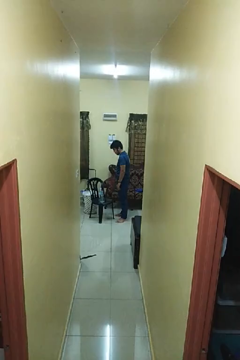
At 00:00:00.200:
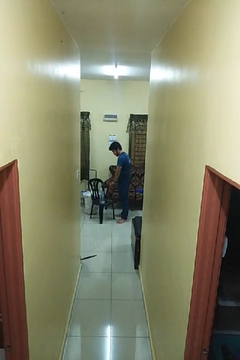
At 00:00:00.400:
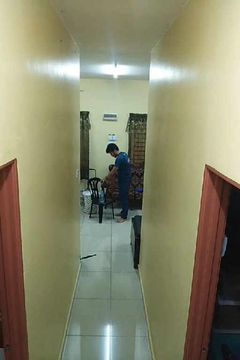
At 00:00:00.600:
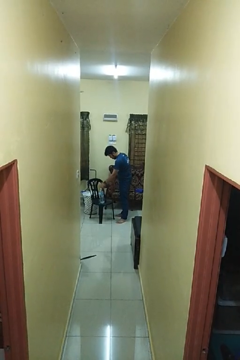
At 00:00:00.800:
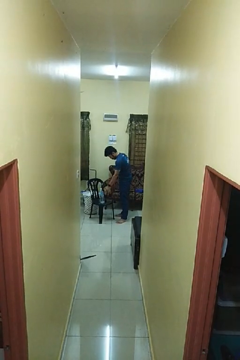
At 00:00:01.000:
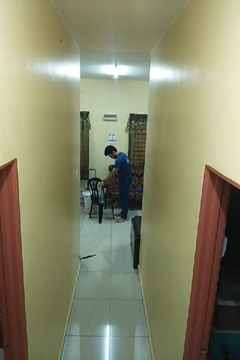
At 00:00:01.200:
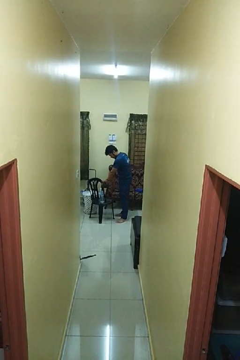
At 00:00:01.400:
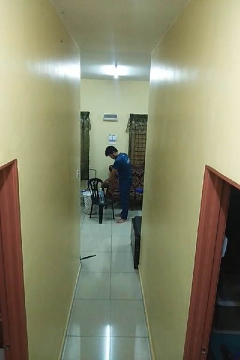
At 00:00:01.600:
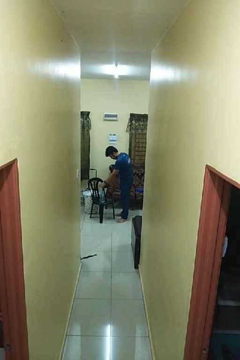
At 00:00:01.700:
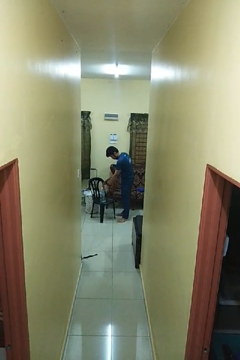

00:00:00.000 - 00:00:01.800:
person waves hand over object

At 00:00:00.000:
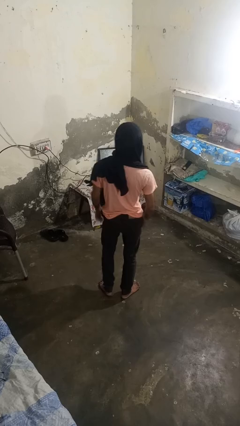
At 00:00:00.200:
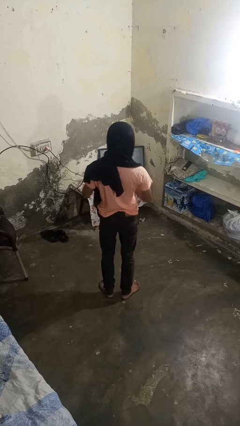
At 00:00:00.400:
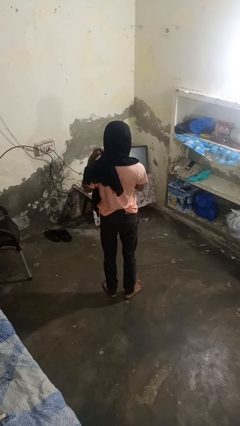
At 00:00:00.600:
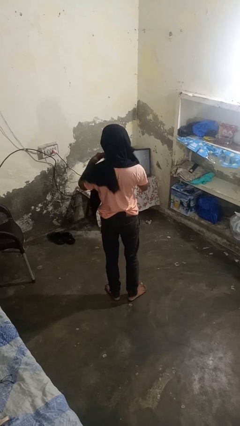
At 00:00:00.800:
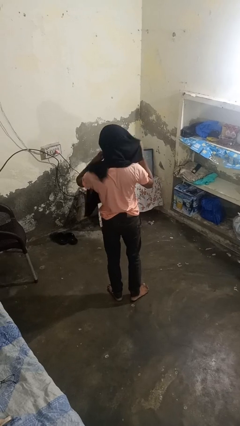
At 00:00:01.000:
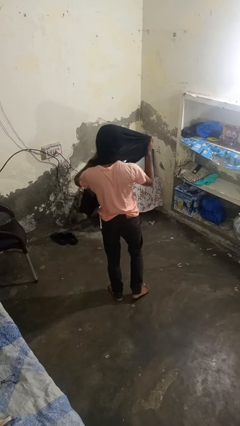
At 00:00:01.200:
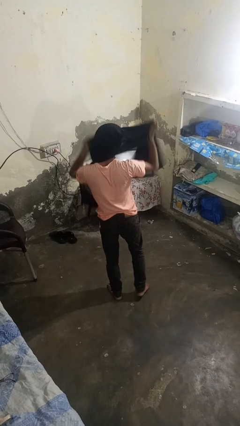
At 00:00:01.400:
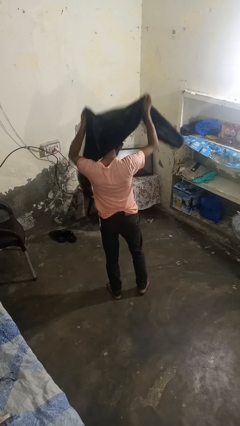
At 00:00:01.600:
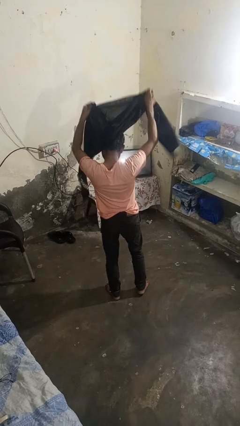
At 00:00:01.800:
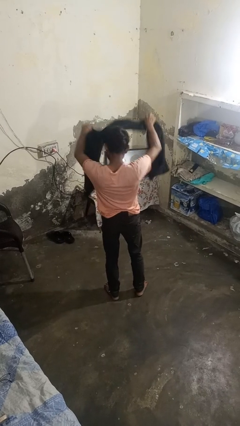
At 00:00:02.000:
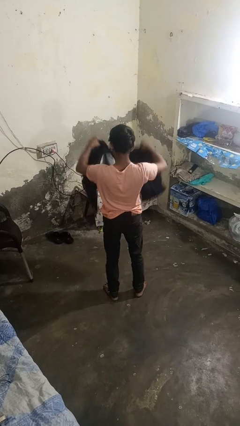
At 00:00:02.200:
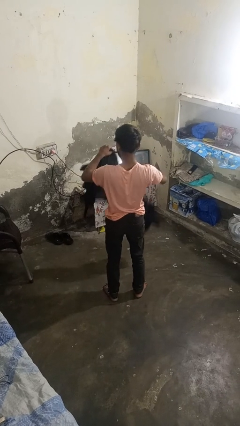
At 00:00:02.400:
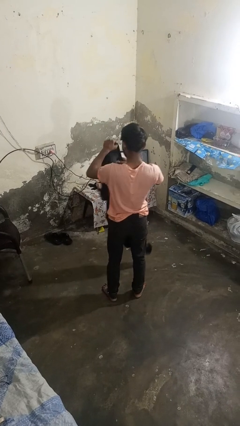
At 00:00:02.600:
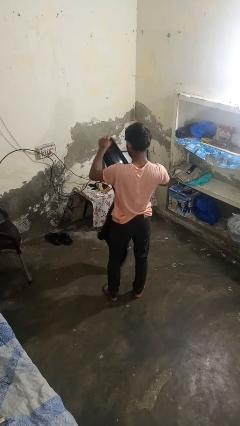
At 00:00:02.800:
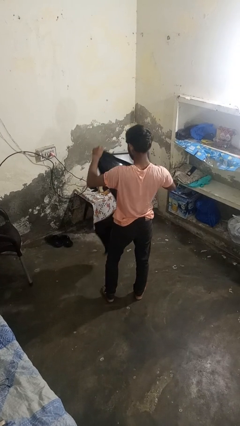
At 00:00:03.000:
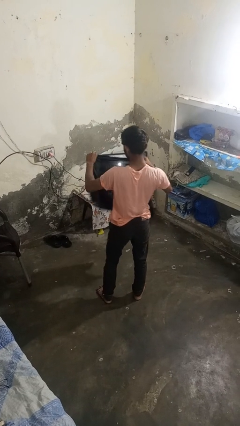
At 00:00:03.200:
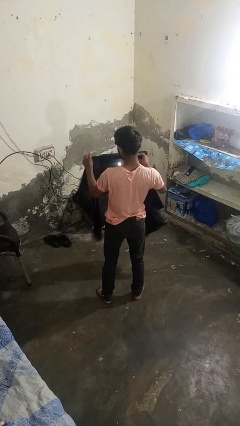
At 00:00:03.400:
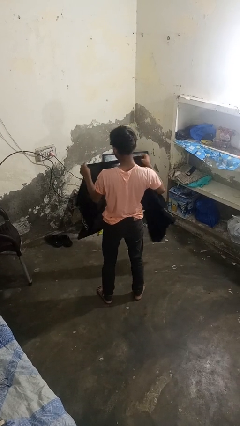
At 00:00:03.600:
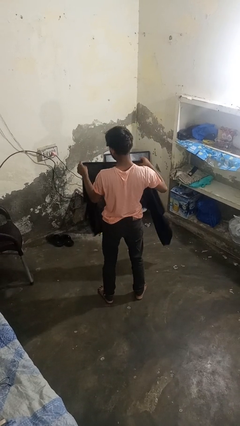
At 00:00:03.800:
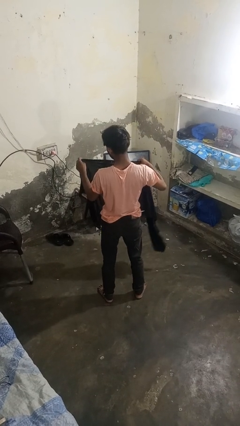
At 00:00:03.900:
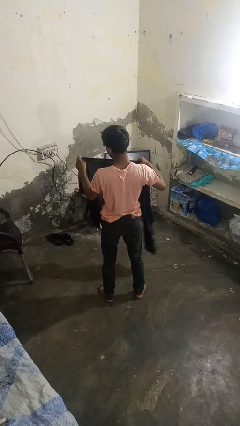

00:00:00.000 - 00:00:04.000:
person takes off scarf

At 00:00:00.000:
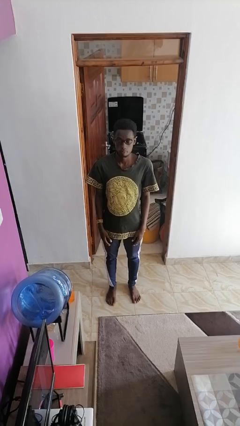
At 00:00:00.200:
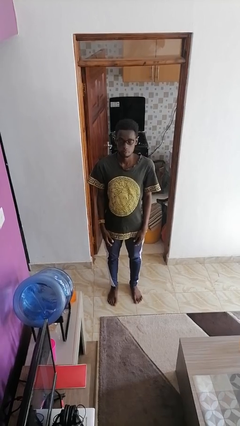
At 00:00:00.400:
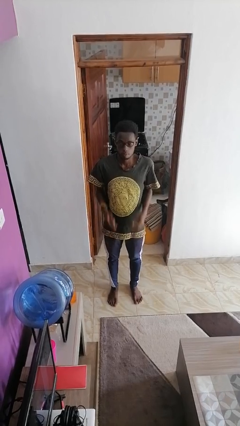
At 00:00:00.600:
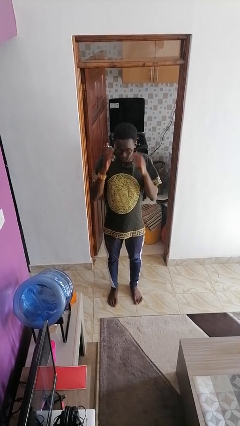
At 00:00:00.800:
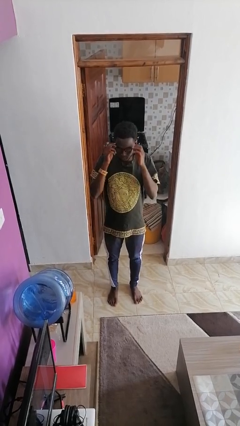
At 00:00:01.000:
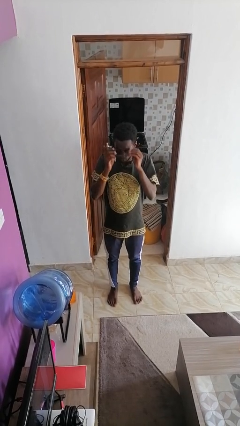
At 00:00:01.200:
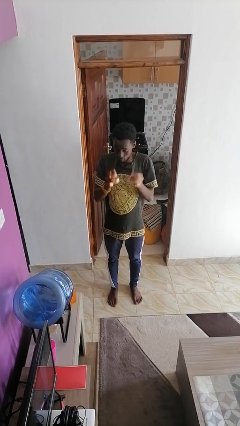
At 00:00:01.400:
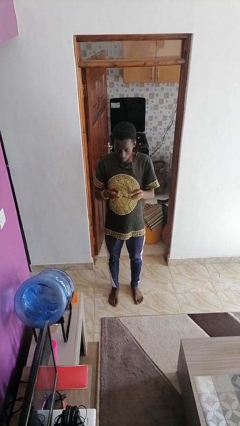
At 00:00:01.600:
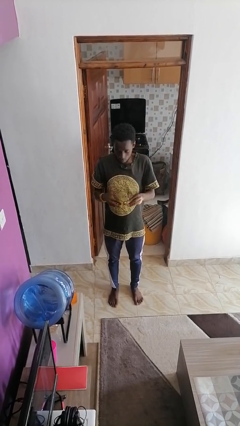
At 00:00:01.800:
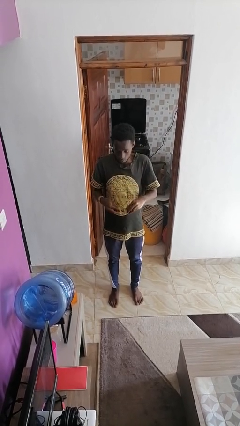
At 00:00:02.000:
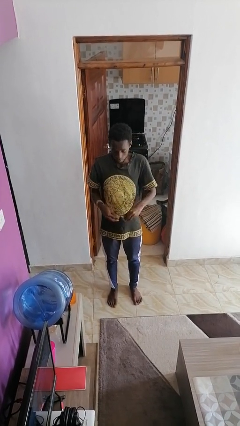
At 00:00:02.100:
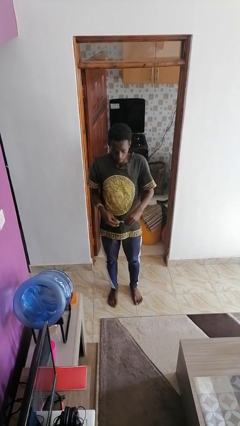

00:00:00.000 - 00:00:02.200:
person takes off glasses

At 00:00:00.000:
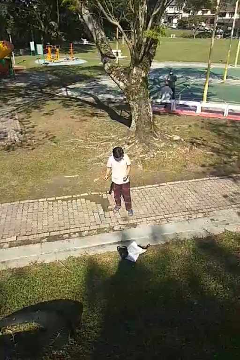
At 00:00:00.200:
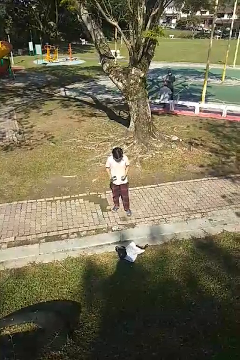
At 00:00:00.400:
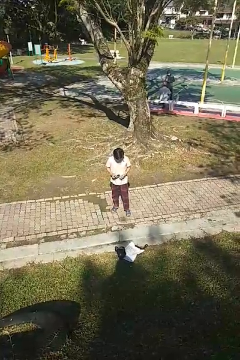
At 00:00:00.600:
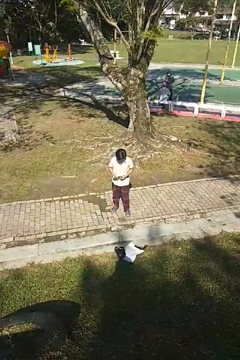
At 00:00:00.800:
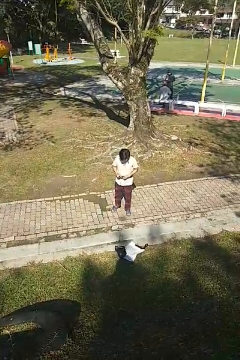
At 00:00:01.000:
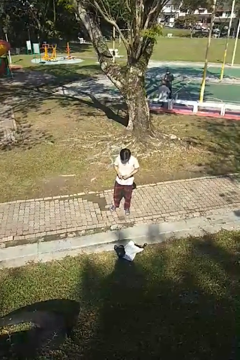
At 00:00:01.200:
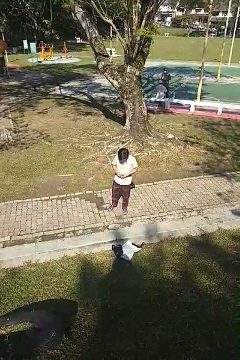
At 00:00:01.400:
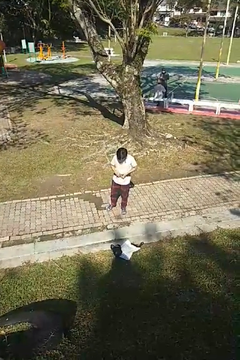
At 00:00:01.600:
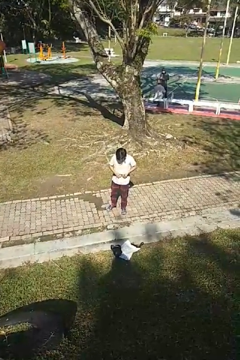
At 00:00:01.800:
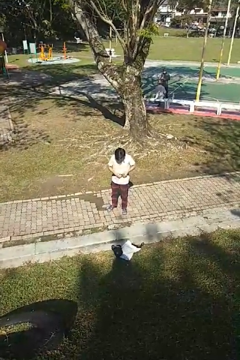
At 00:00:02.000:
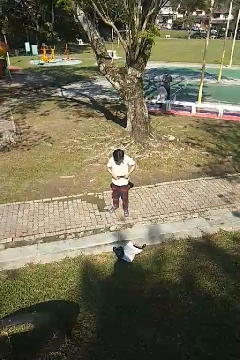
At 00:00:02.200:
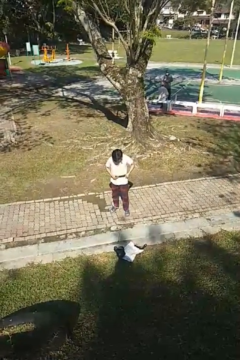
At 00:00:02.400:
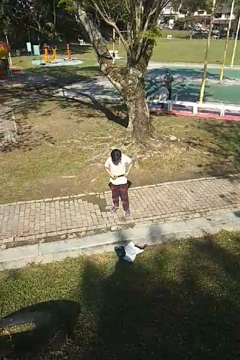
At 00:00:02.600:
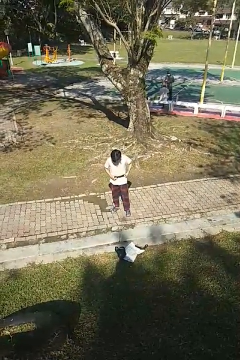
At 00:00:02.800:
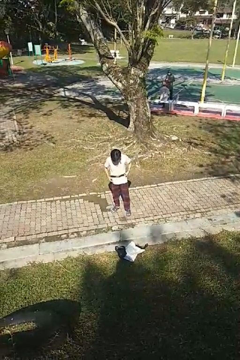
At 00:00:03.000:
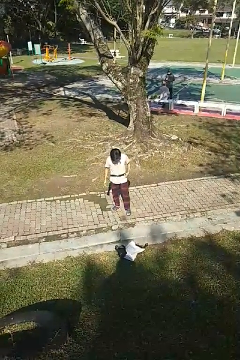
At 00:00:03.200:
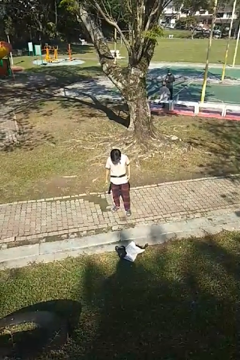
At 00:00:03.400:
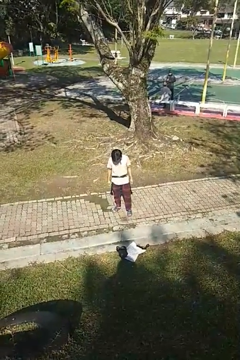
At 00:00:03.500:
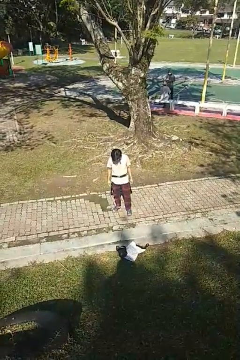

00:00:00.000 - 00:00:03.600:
person puts on belt

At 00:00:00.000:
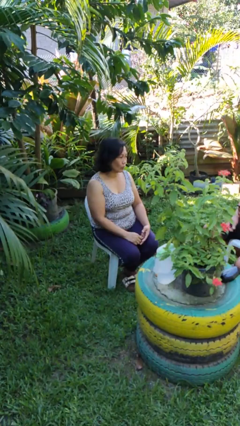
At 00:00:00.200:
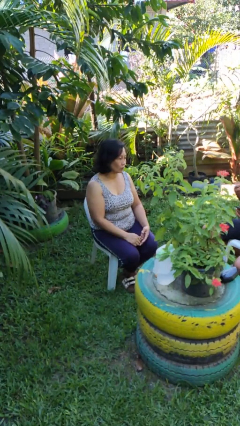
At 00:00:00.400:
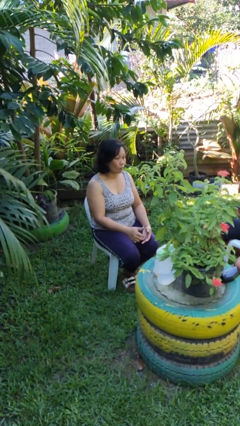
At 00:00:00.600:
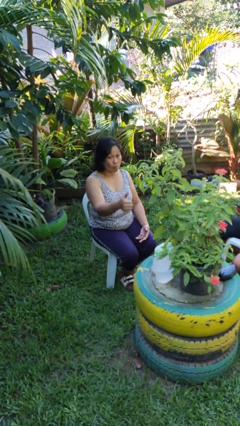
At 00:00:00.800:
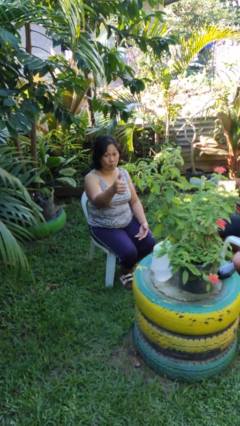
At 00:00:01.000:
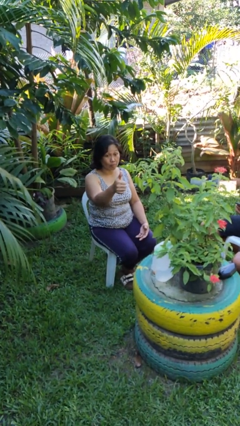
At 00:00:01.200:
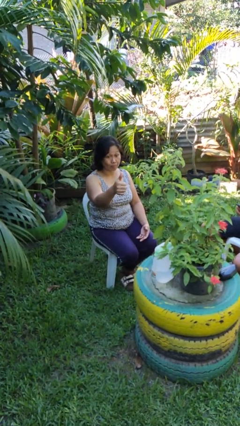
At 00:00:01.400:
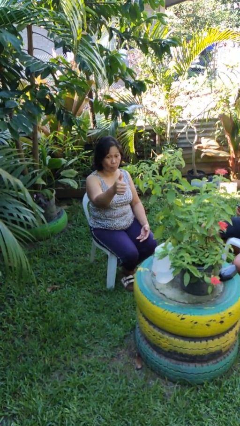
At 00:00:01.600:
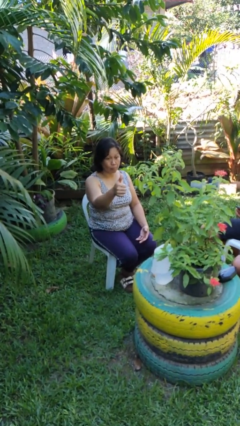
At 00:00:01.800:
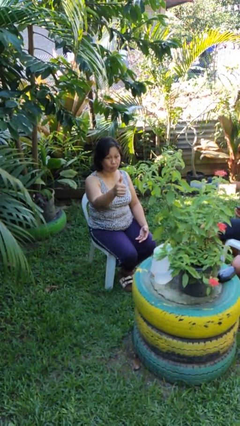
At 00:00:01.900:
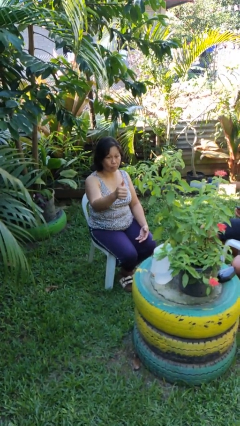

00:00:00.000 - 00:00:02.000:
person gestures thumbs up

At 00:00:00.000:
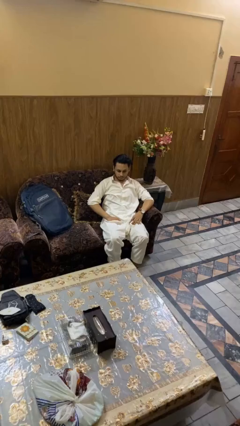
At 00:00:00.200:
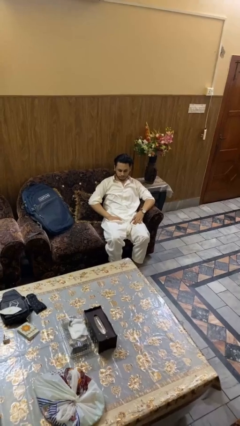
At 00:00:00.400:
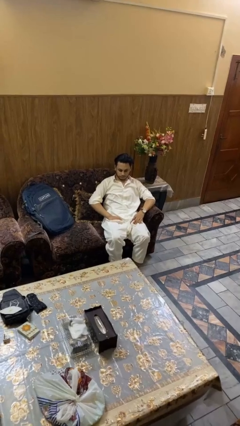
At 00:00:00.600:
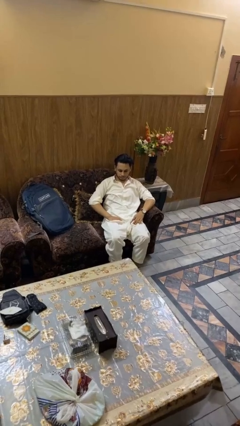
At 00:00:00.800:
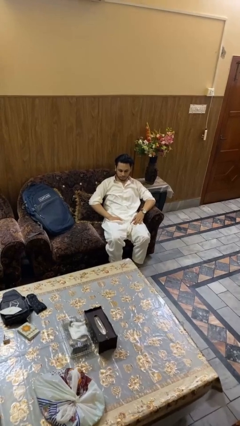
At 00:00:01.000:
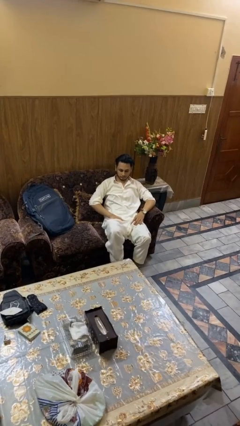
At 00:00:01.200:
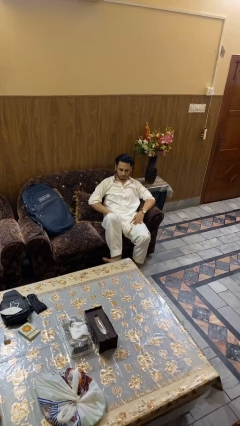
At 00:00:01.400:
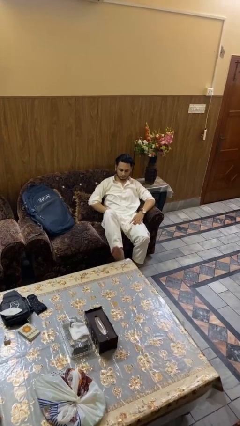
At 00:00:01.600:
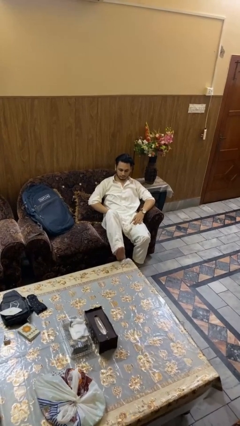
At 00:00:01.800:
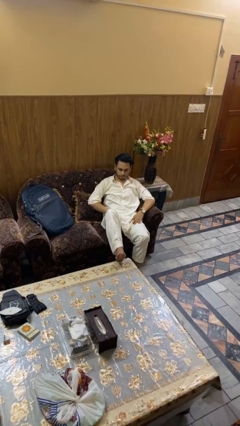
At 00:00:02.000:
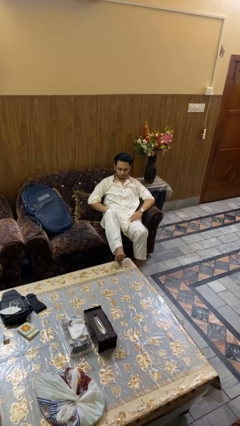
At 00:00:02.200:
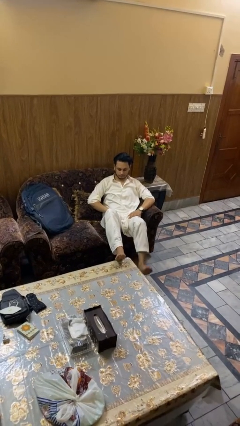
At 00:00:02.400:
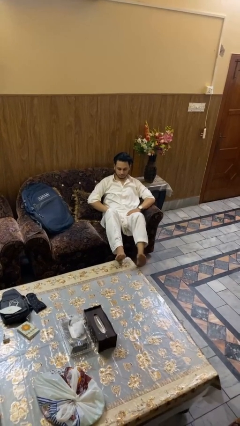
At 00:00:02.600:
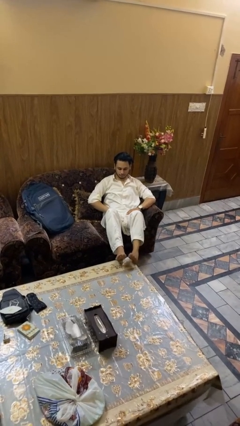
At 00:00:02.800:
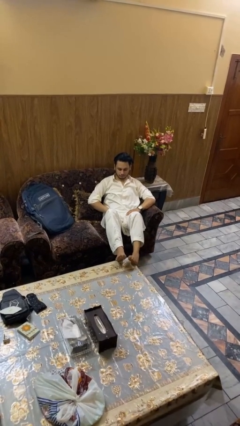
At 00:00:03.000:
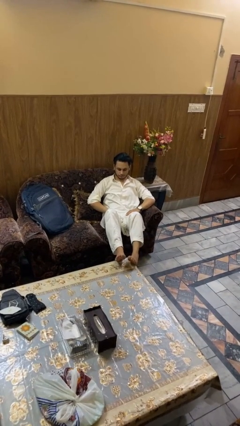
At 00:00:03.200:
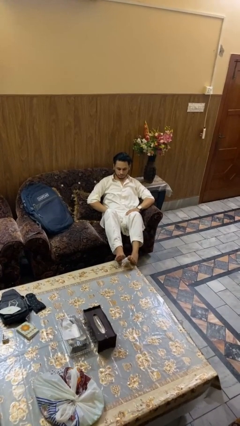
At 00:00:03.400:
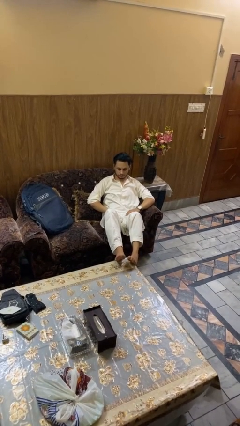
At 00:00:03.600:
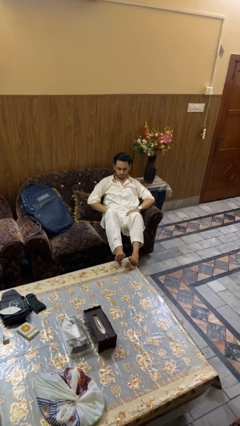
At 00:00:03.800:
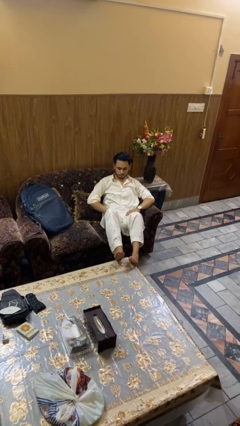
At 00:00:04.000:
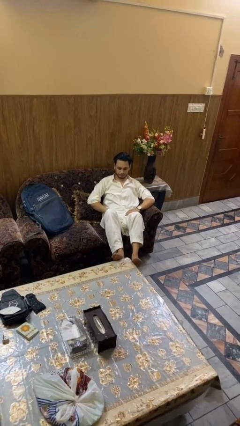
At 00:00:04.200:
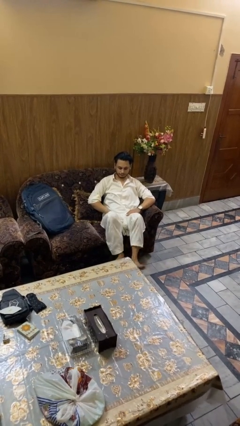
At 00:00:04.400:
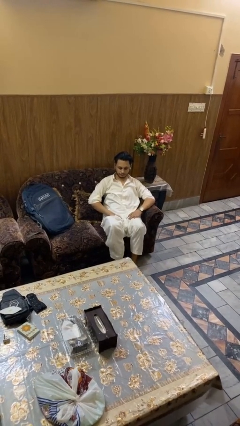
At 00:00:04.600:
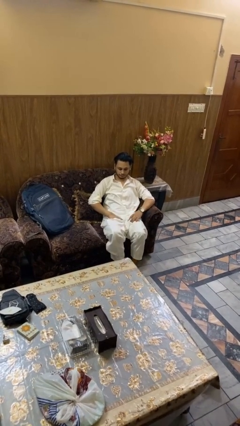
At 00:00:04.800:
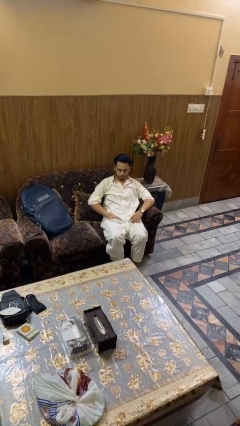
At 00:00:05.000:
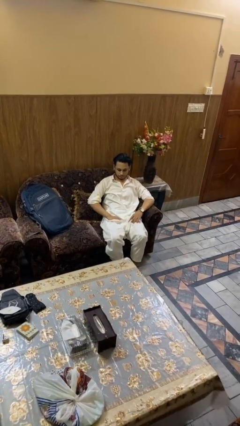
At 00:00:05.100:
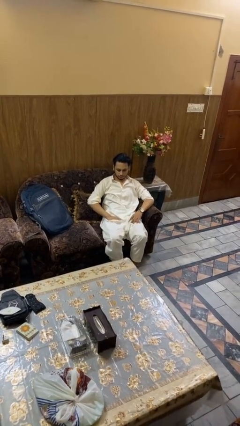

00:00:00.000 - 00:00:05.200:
person puts feet up
